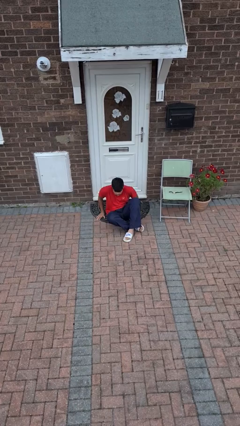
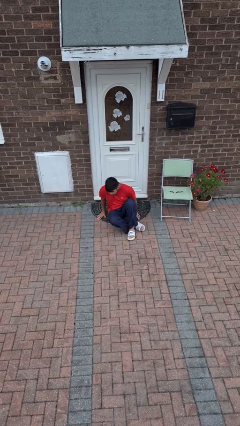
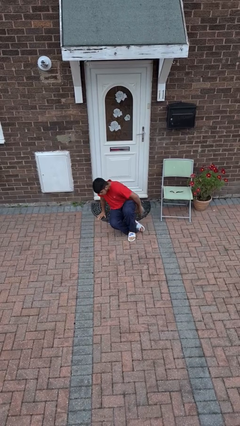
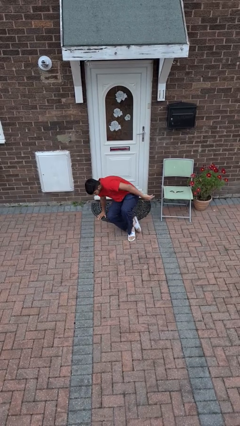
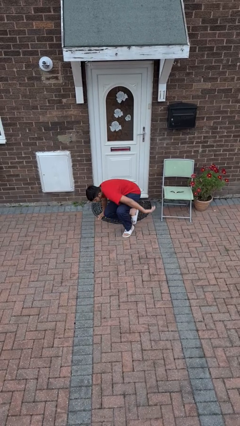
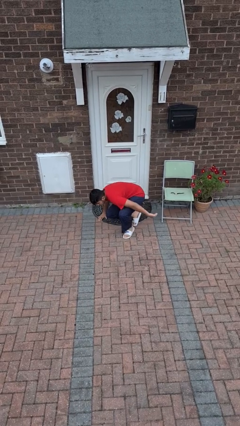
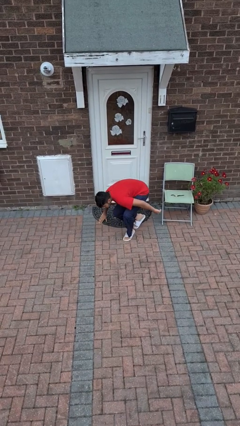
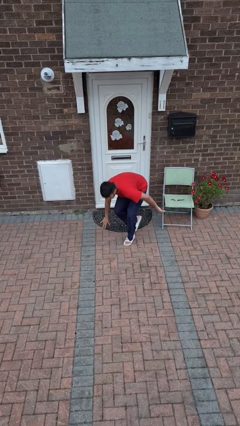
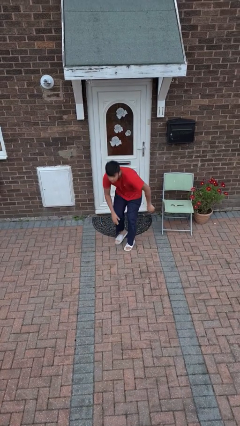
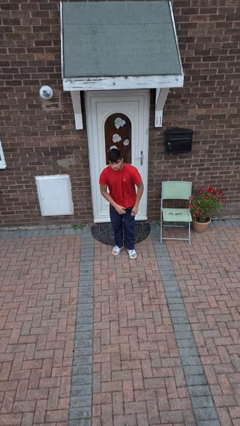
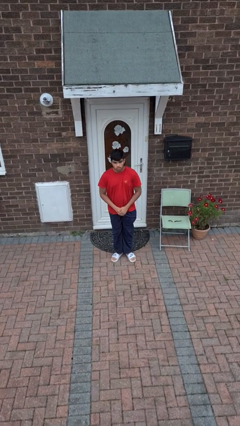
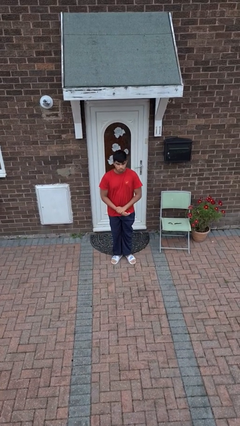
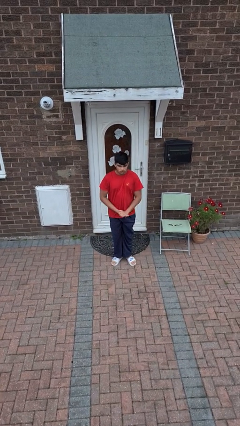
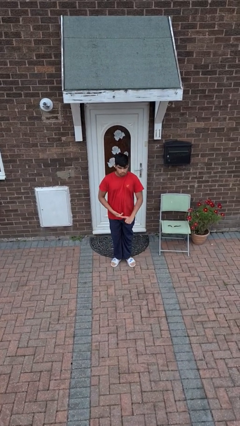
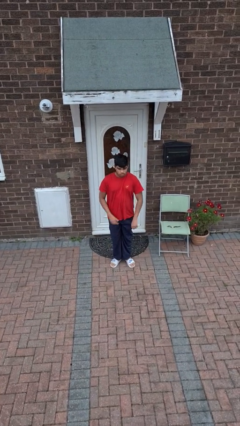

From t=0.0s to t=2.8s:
person stands up from floor

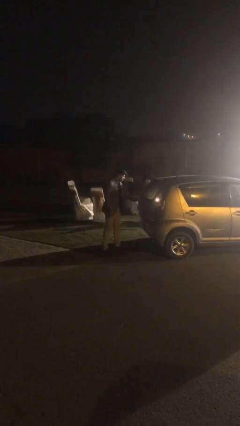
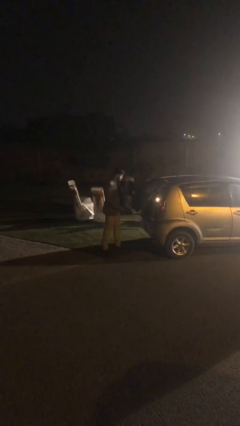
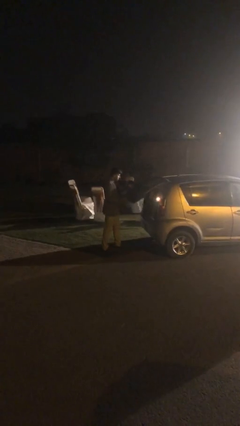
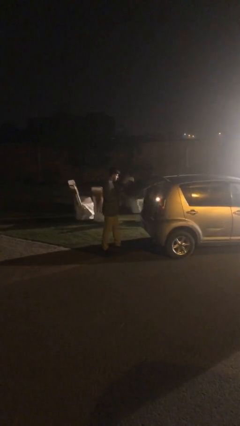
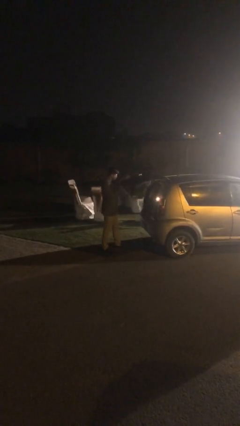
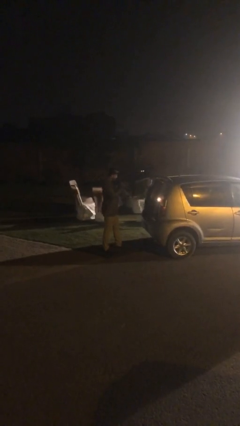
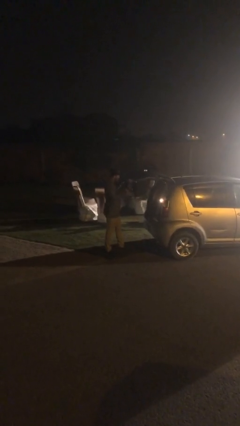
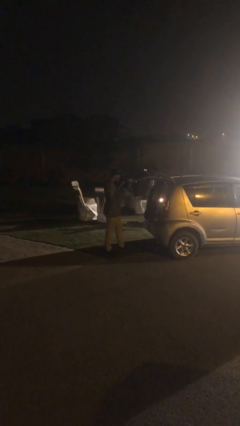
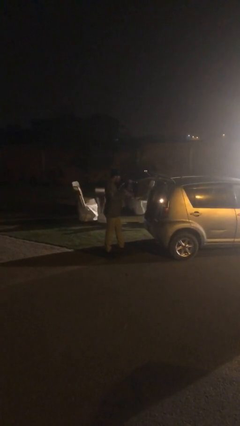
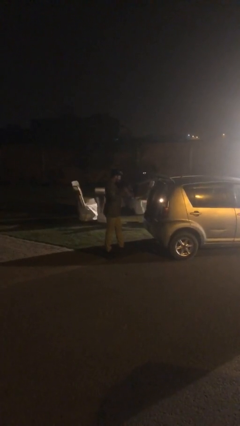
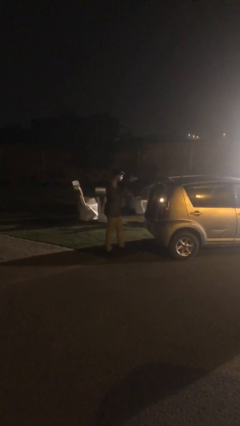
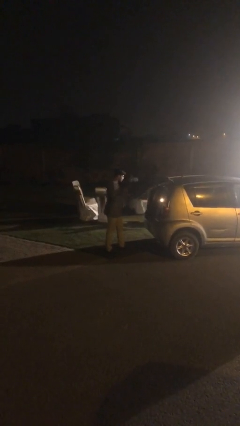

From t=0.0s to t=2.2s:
person opens car trunk

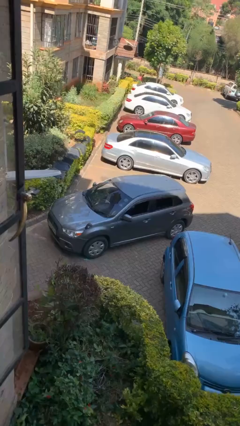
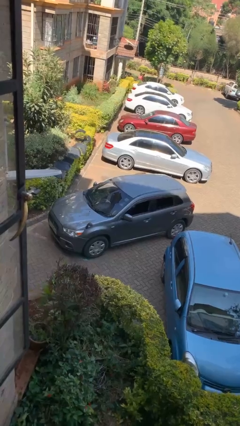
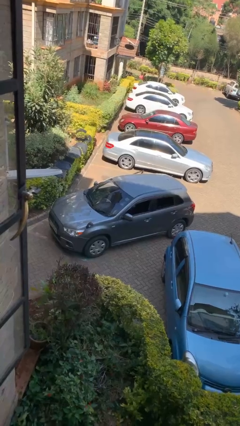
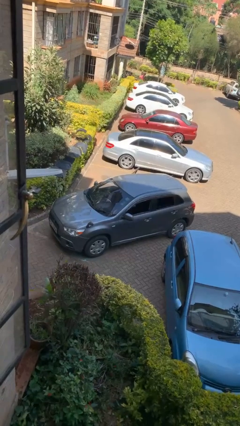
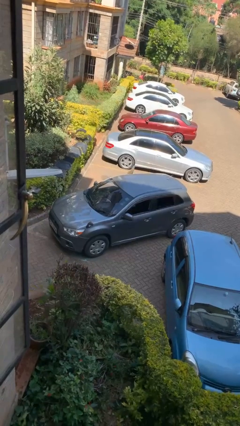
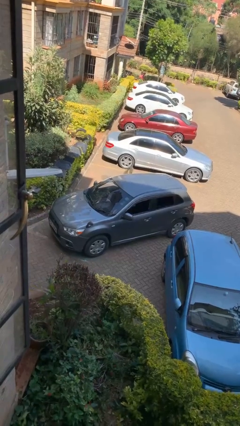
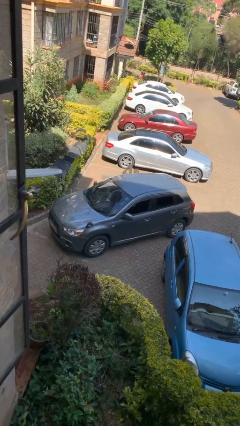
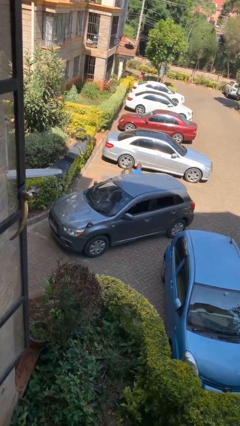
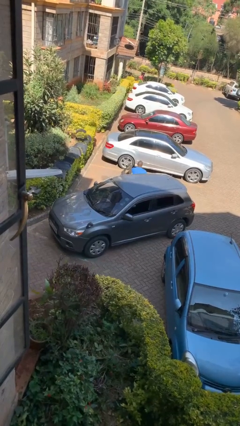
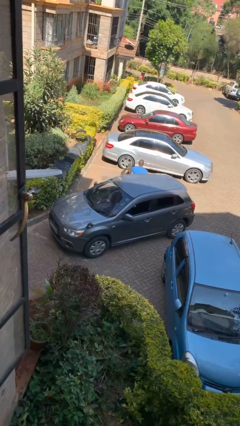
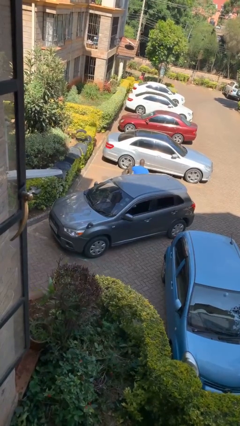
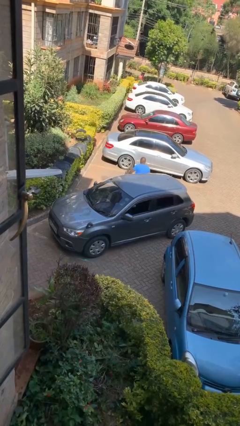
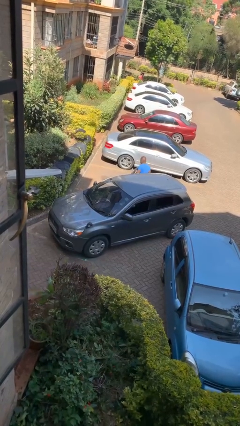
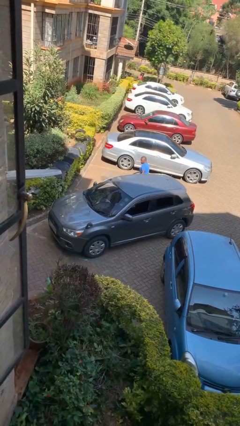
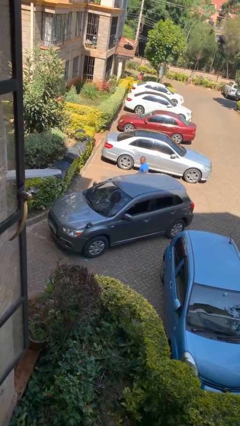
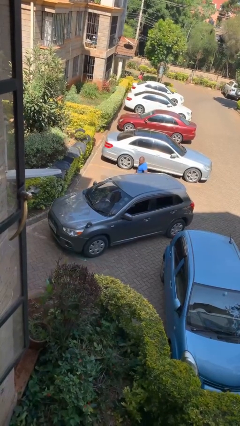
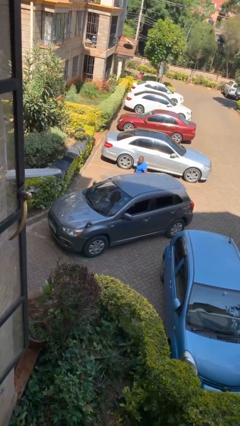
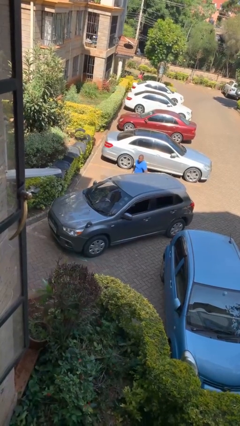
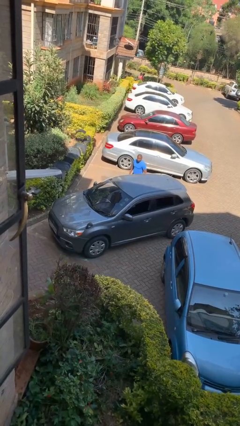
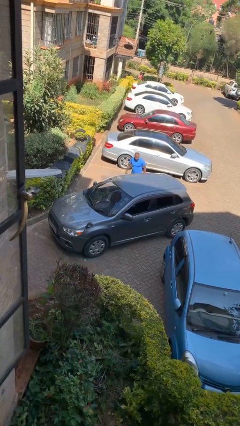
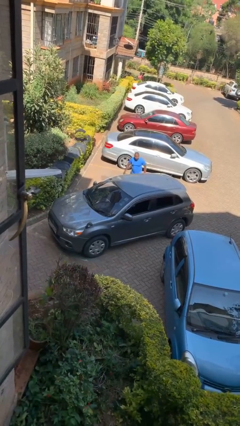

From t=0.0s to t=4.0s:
car drops off person

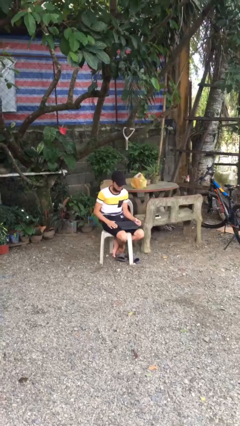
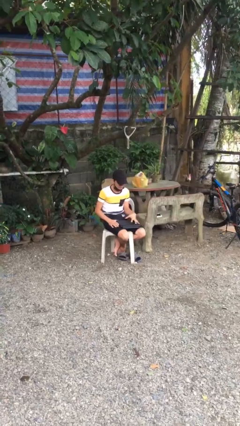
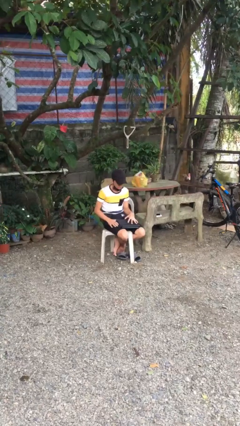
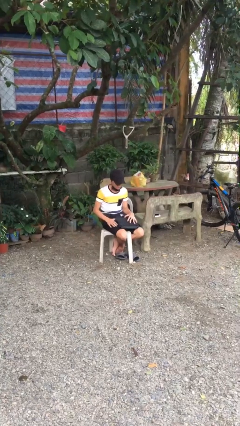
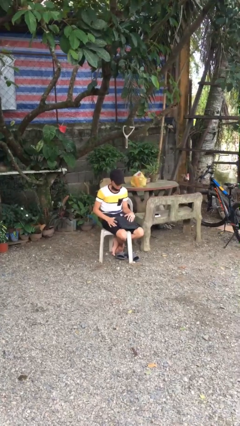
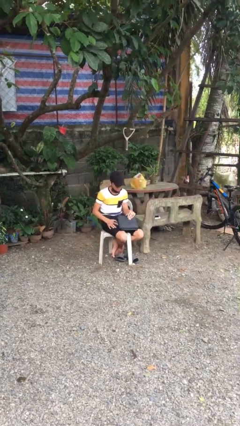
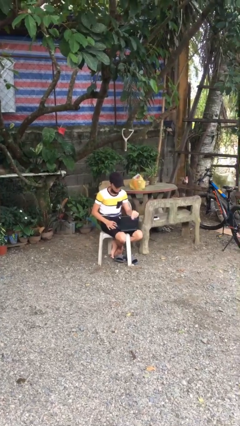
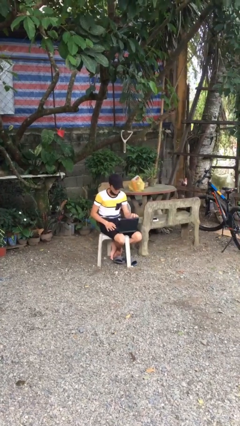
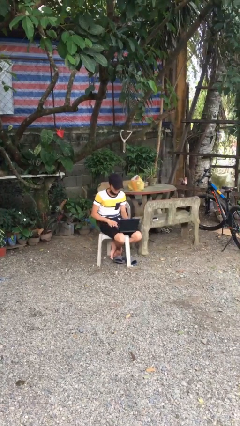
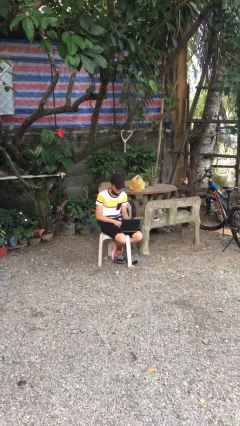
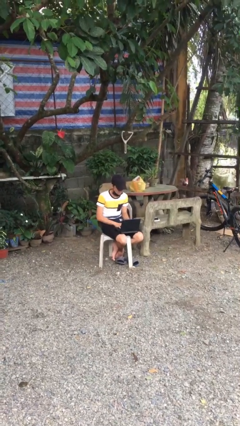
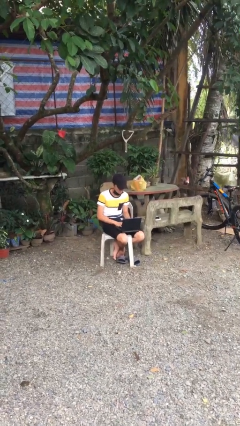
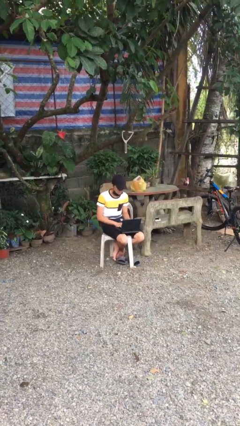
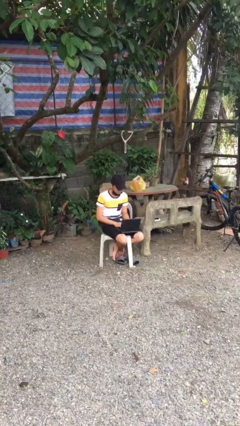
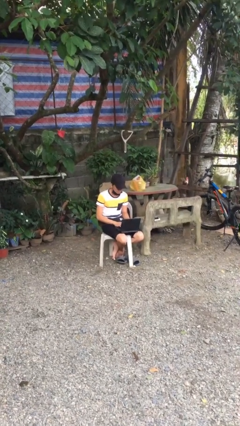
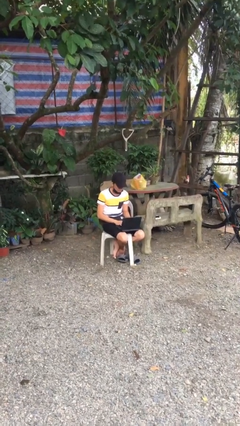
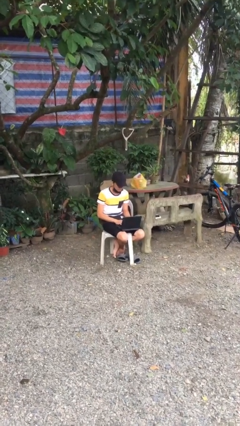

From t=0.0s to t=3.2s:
person interacts with laptop

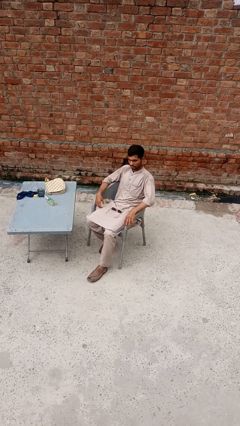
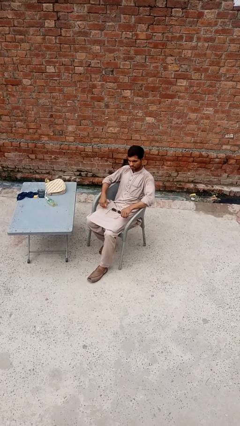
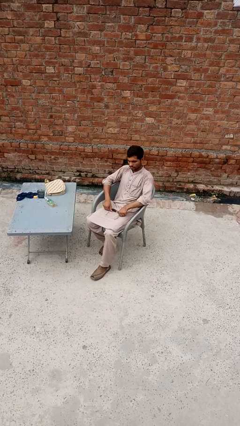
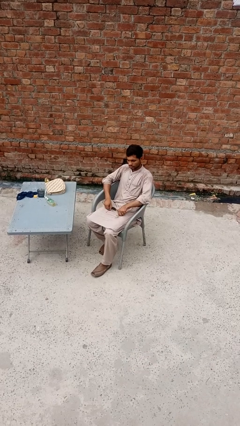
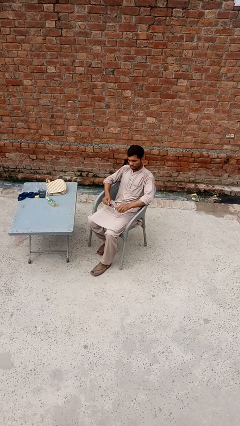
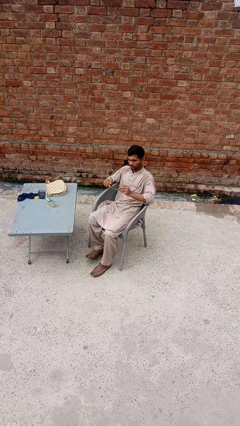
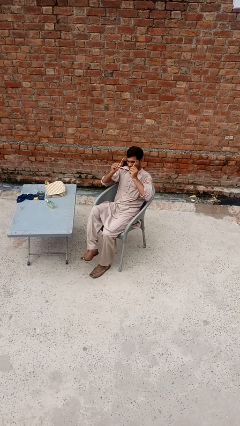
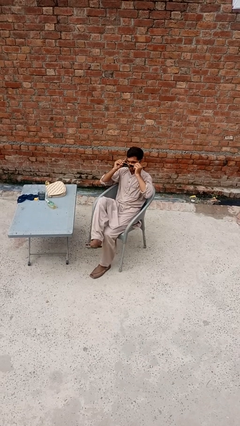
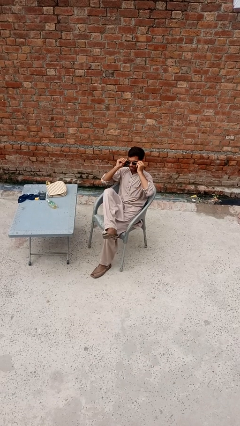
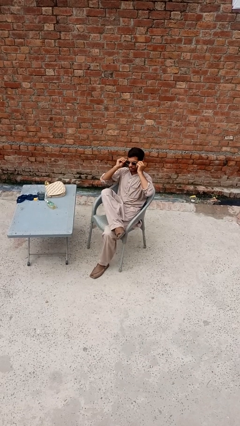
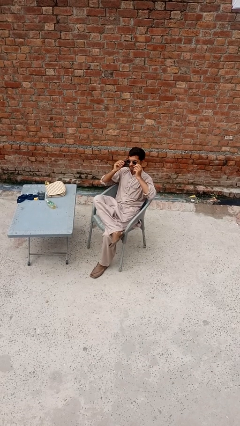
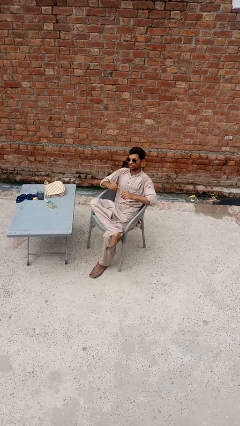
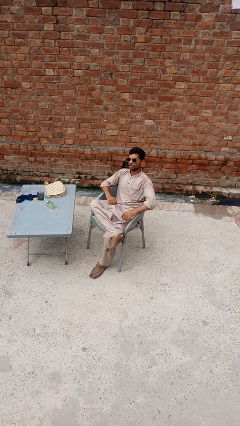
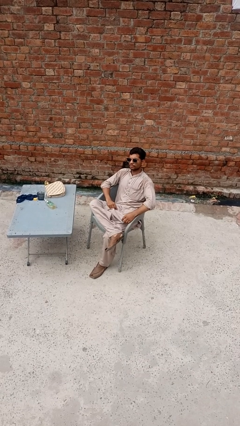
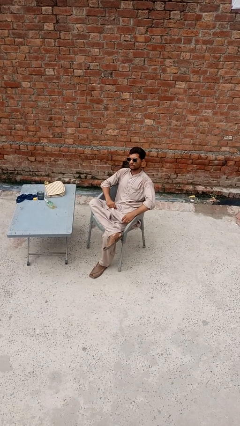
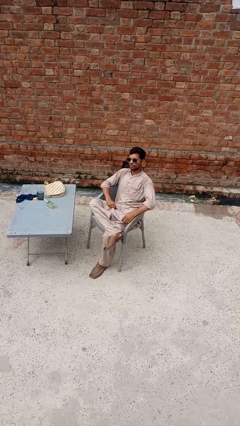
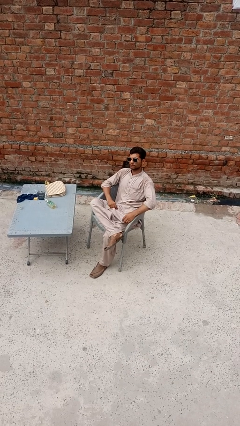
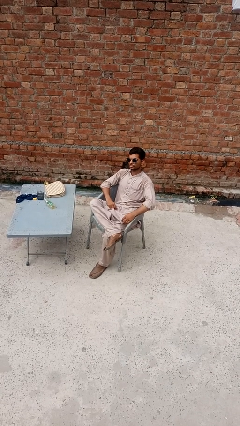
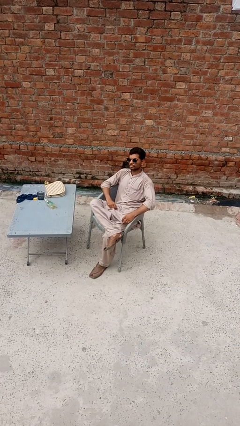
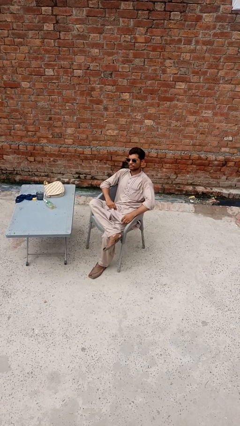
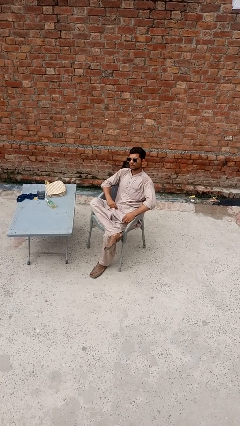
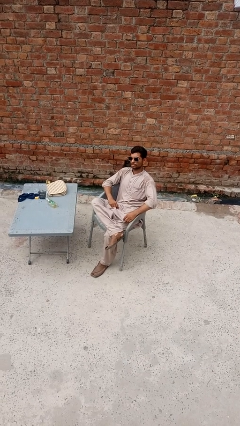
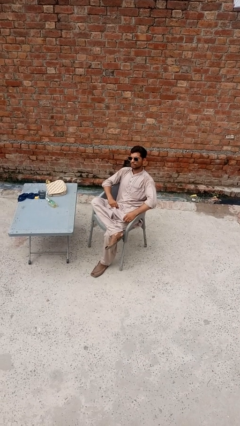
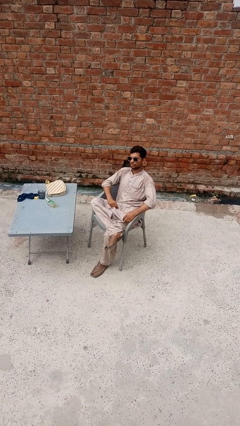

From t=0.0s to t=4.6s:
person puts on sunglasses

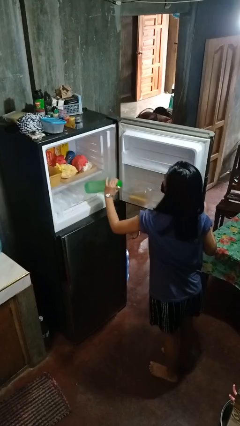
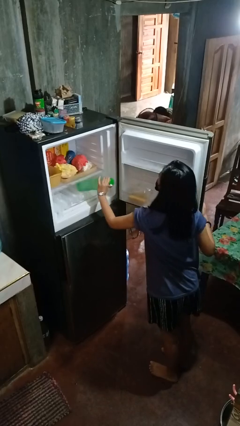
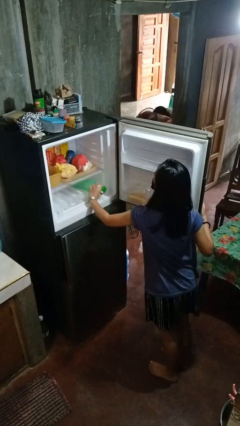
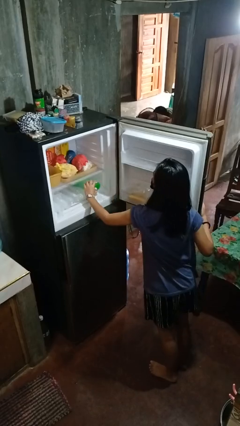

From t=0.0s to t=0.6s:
person puts object into refrigerator
